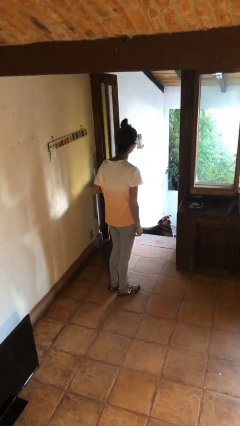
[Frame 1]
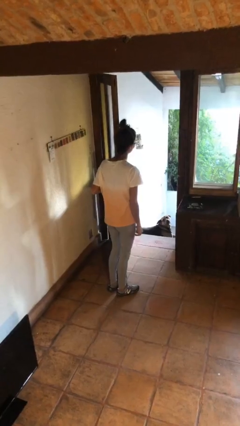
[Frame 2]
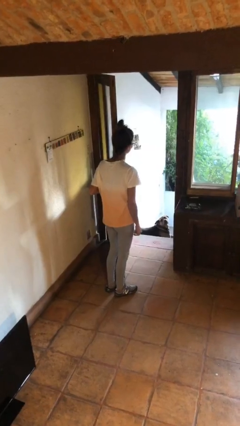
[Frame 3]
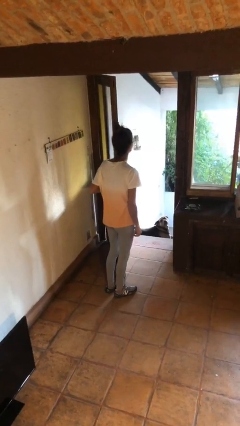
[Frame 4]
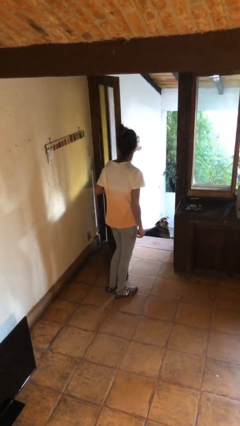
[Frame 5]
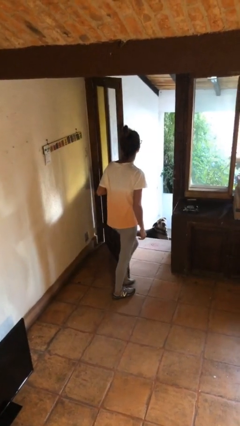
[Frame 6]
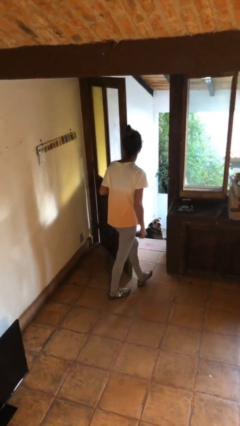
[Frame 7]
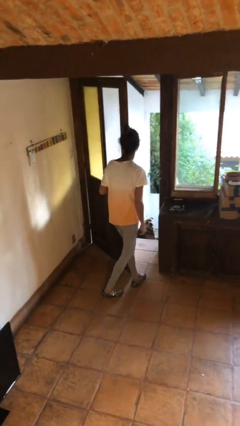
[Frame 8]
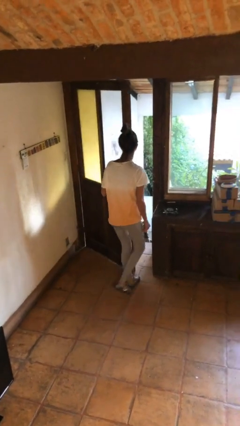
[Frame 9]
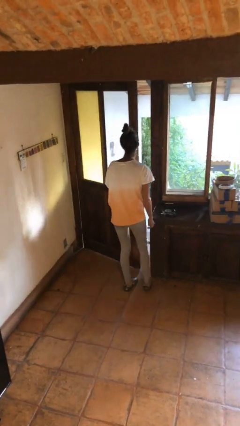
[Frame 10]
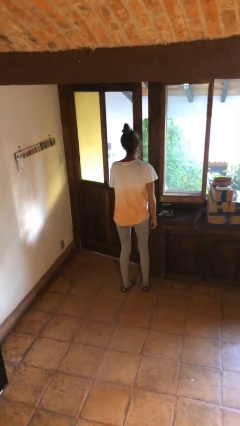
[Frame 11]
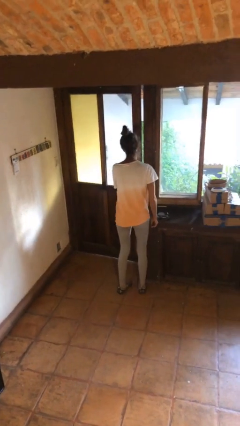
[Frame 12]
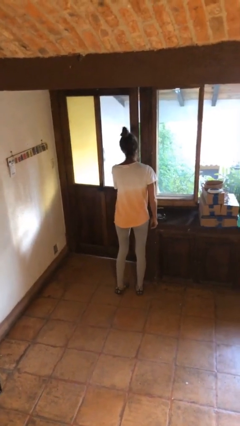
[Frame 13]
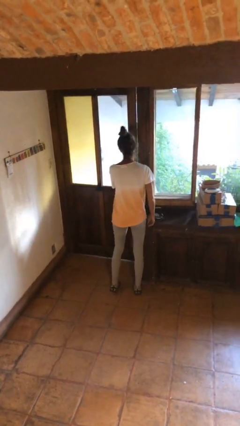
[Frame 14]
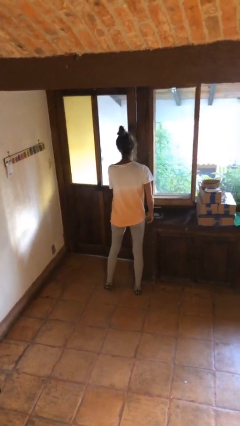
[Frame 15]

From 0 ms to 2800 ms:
person closes facility door

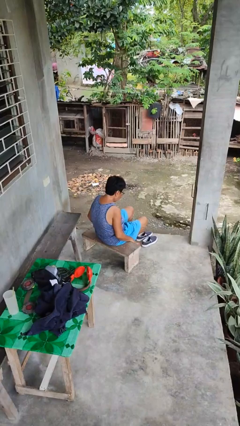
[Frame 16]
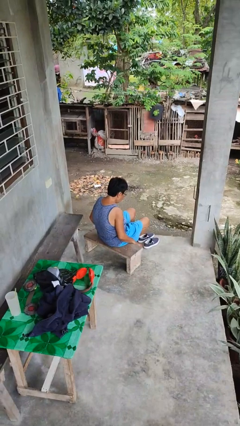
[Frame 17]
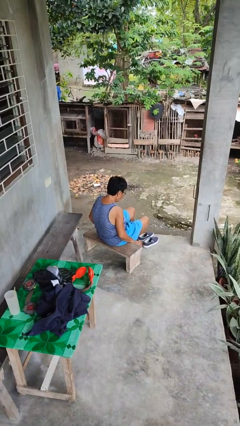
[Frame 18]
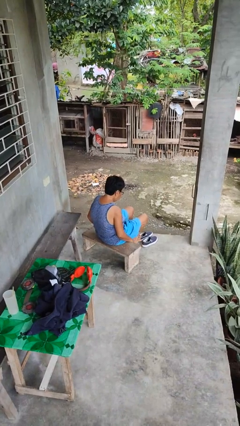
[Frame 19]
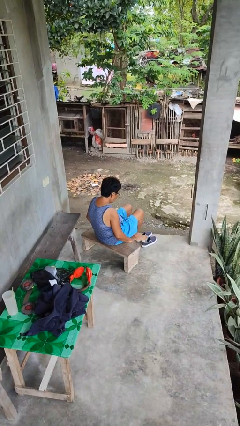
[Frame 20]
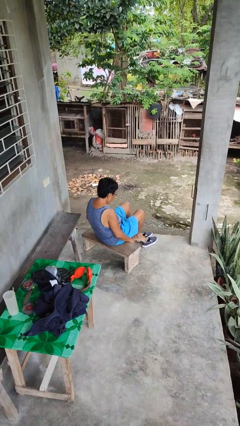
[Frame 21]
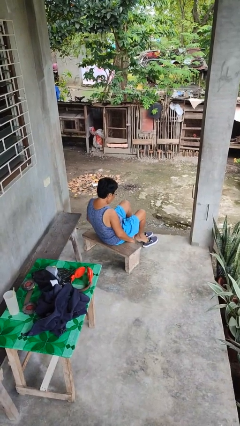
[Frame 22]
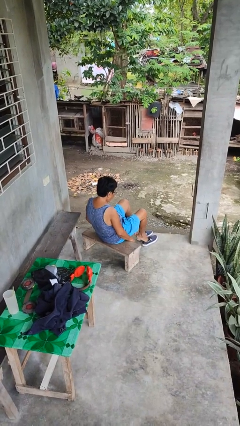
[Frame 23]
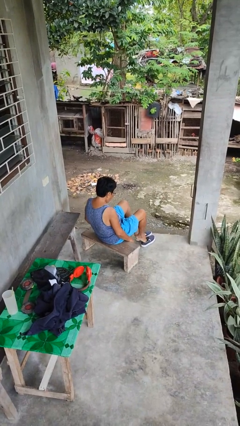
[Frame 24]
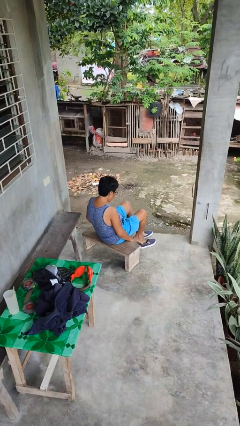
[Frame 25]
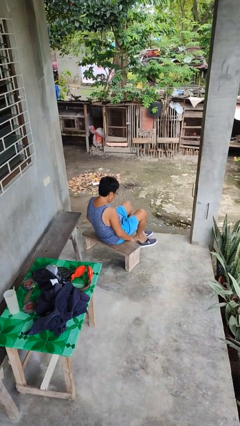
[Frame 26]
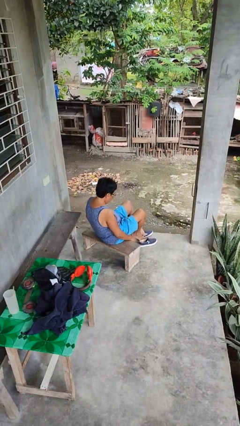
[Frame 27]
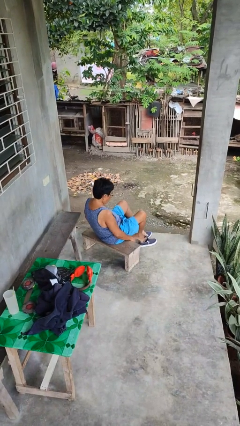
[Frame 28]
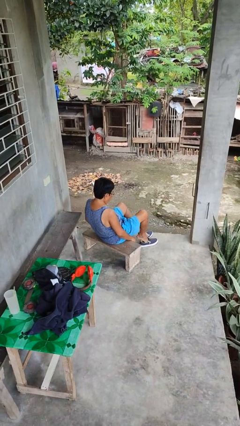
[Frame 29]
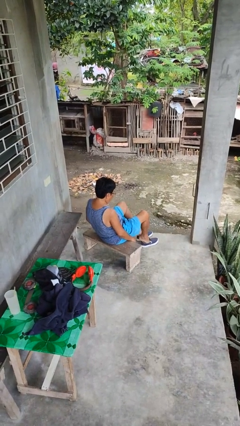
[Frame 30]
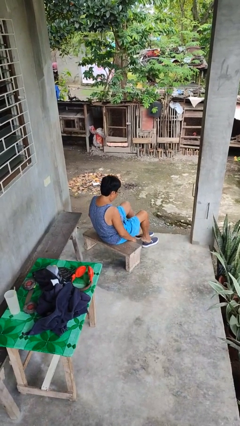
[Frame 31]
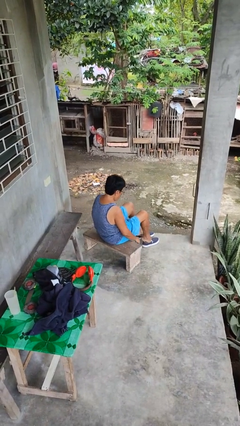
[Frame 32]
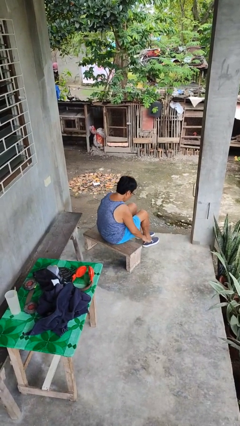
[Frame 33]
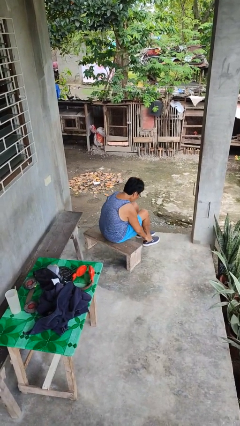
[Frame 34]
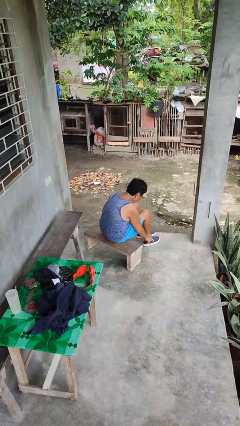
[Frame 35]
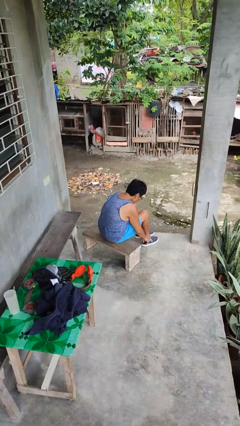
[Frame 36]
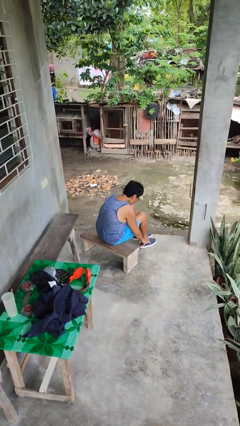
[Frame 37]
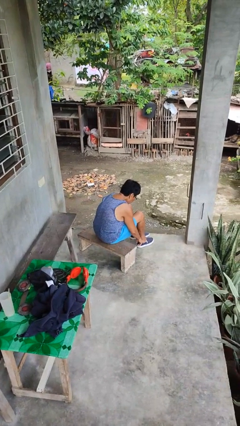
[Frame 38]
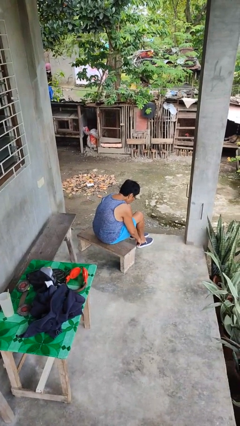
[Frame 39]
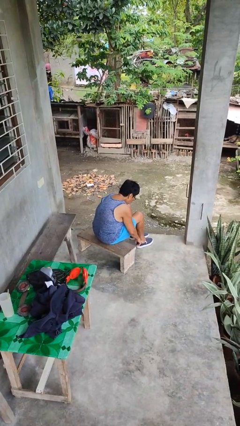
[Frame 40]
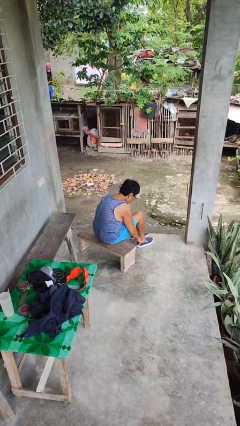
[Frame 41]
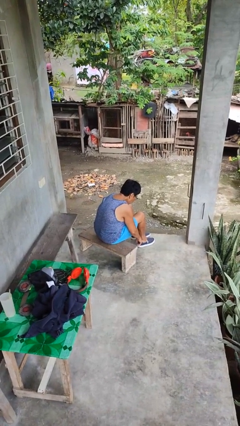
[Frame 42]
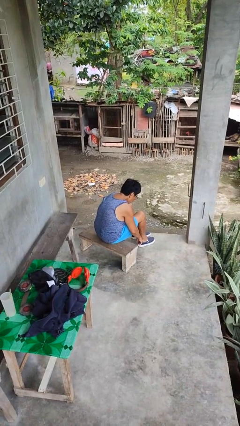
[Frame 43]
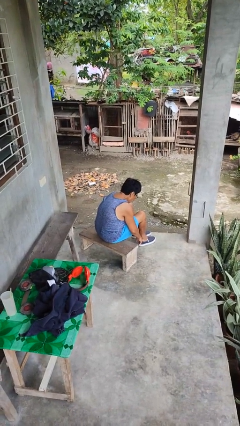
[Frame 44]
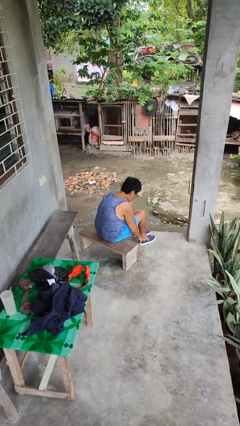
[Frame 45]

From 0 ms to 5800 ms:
person puts on shoes

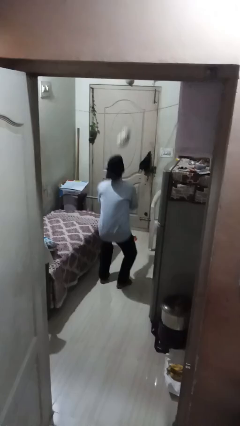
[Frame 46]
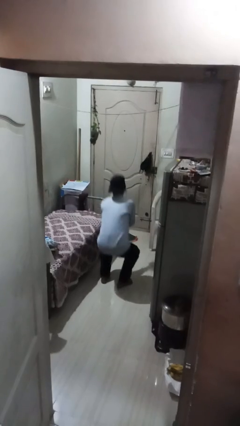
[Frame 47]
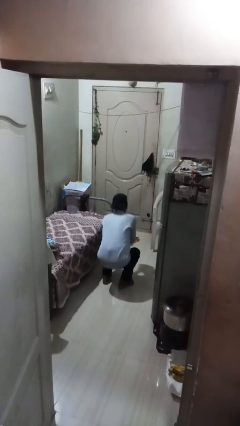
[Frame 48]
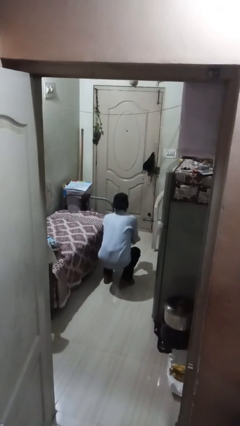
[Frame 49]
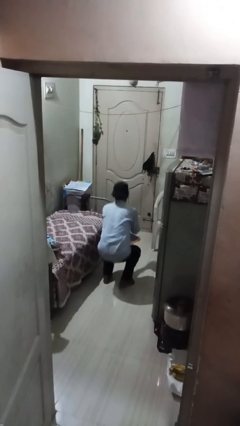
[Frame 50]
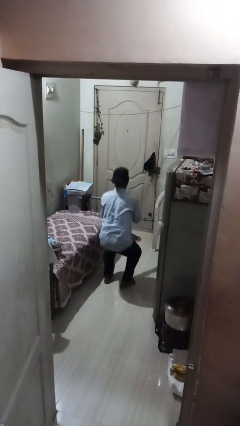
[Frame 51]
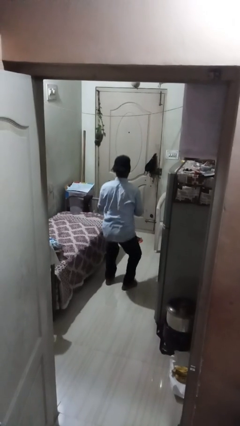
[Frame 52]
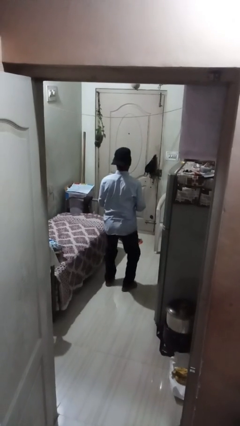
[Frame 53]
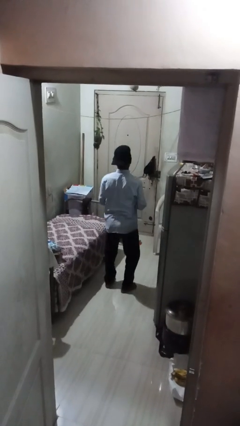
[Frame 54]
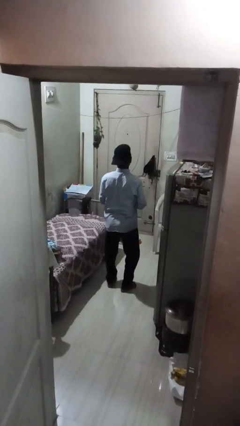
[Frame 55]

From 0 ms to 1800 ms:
person catches dropped object

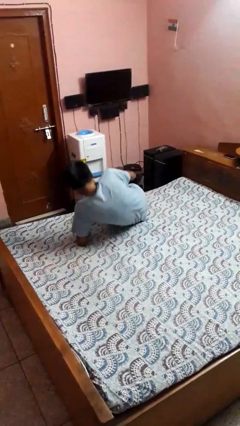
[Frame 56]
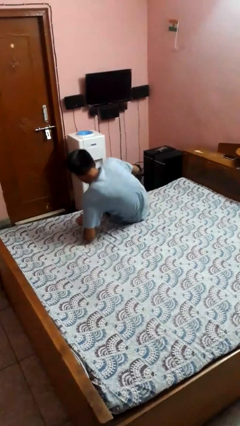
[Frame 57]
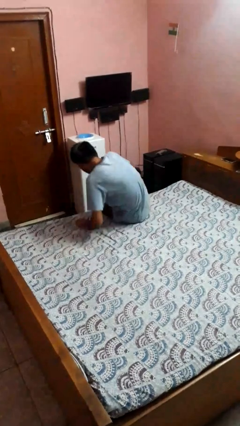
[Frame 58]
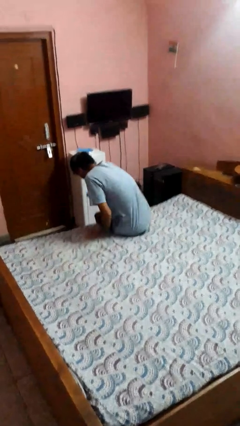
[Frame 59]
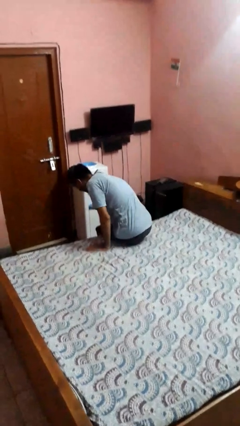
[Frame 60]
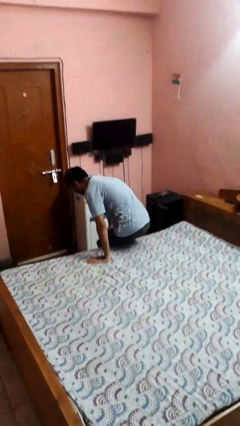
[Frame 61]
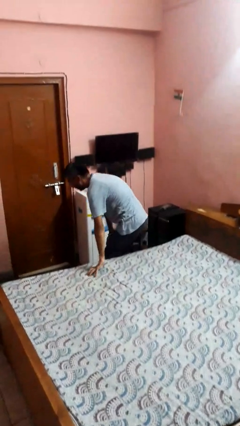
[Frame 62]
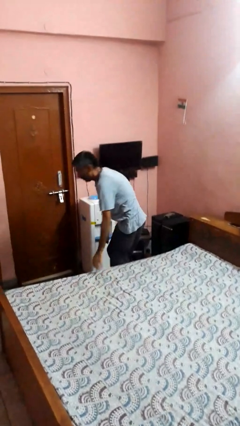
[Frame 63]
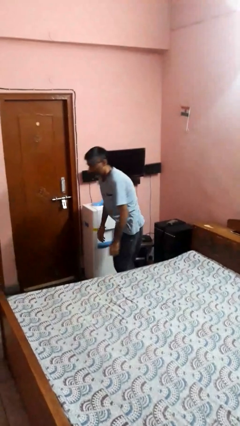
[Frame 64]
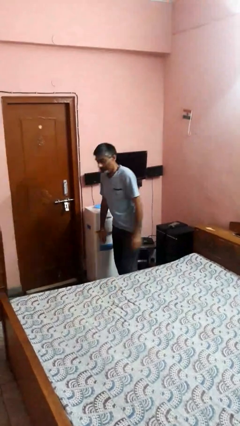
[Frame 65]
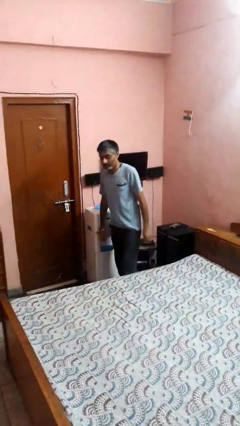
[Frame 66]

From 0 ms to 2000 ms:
person stands up

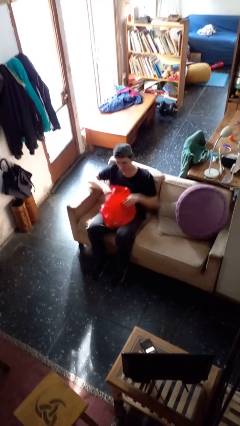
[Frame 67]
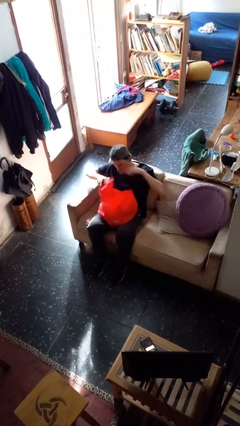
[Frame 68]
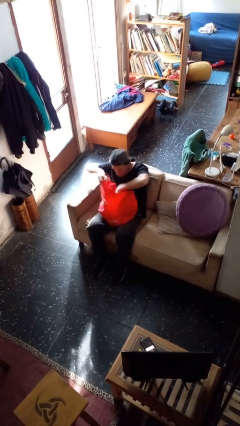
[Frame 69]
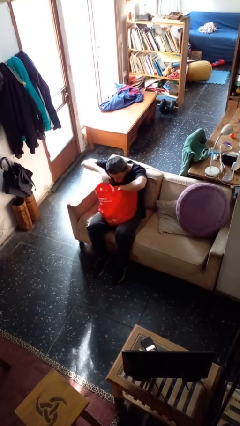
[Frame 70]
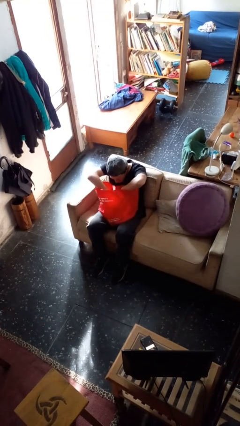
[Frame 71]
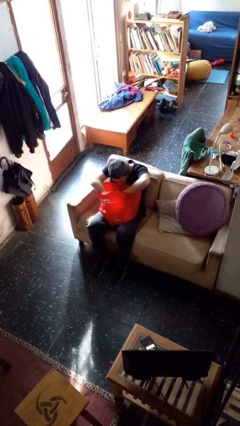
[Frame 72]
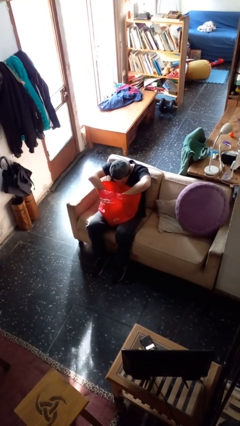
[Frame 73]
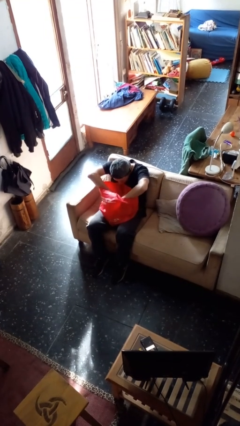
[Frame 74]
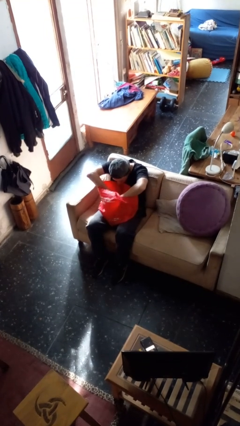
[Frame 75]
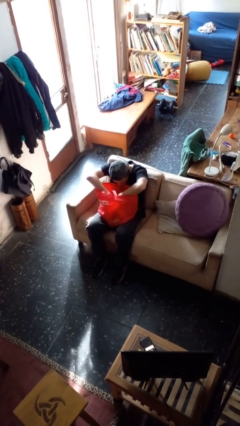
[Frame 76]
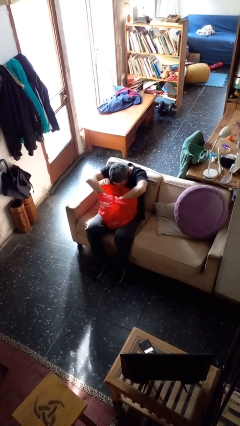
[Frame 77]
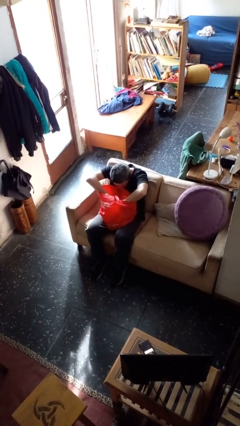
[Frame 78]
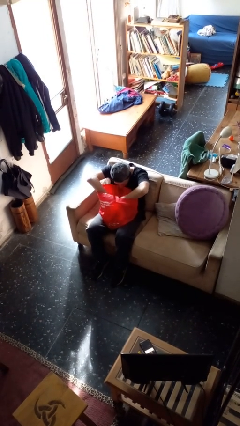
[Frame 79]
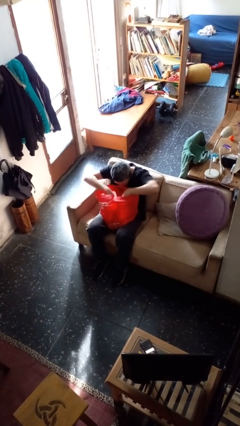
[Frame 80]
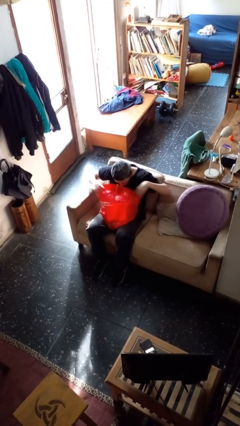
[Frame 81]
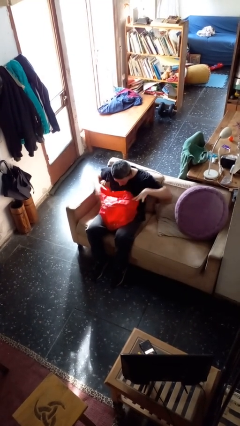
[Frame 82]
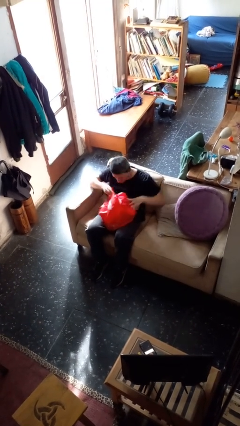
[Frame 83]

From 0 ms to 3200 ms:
person searches in bag

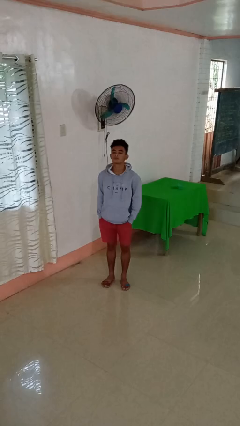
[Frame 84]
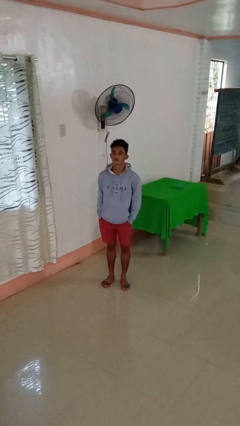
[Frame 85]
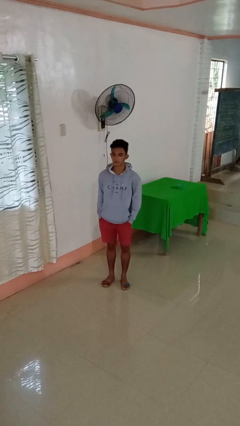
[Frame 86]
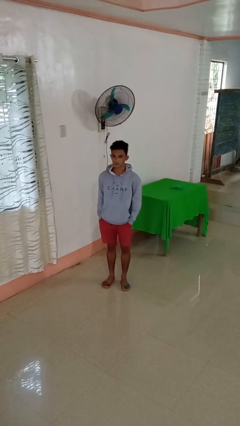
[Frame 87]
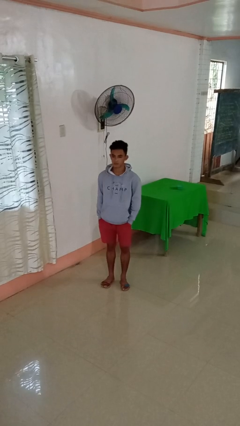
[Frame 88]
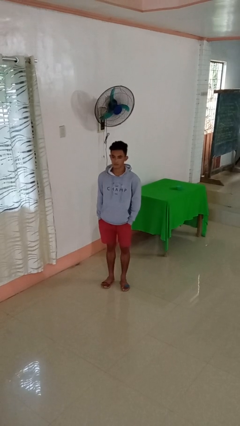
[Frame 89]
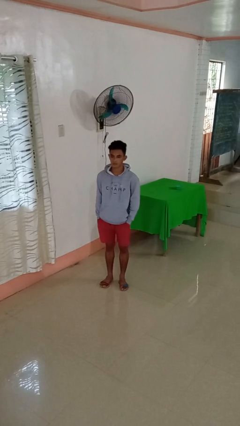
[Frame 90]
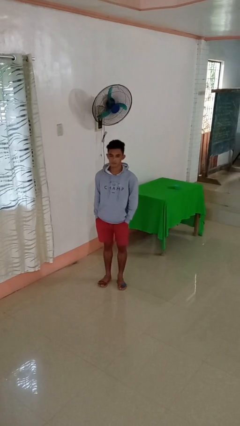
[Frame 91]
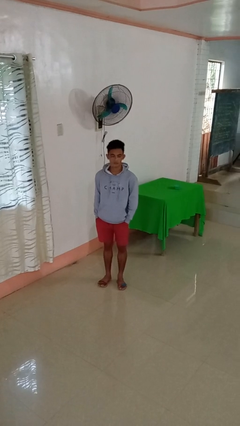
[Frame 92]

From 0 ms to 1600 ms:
person nods head

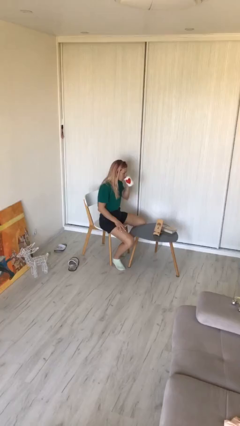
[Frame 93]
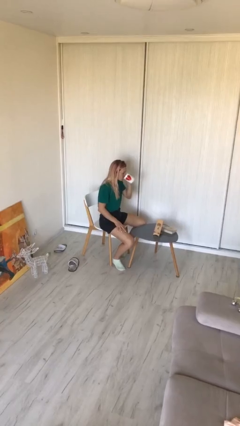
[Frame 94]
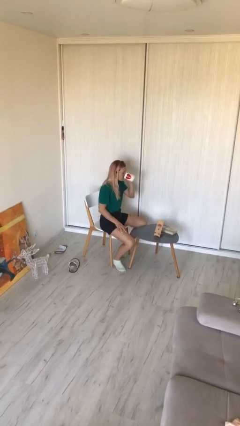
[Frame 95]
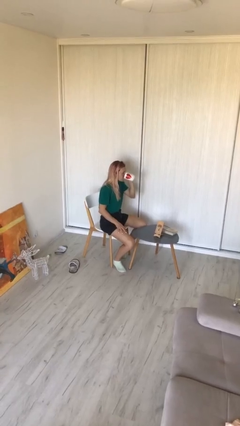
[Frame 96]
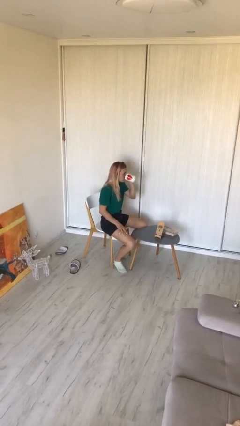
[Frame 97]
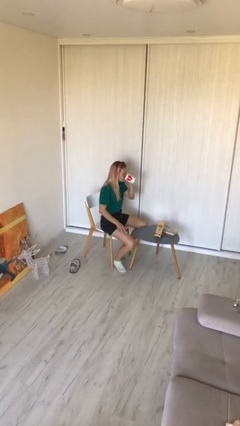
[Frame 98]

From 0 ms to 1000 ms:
person drinks from mug
